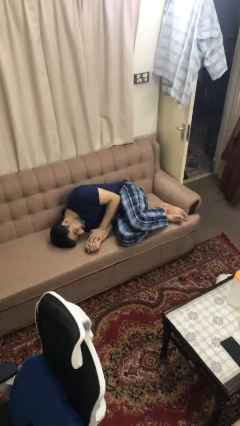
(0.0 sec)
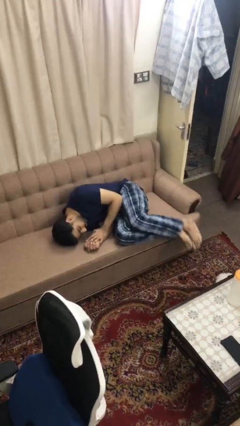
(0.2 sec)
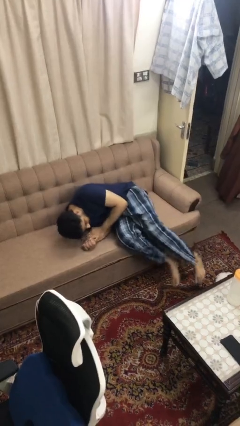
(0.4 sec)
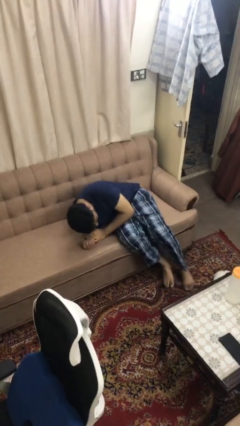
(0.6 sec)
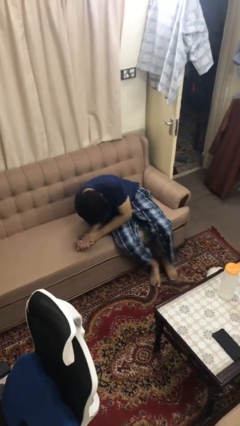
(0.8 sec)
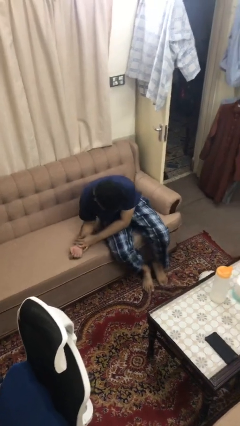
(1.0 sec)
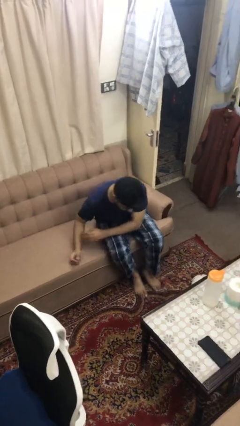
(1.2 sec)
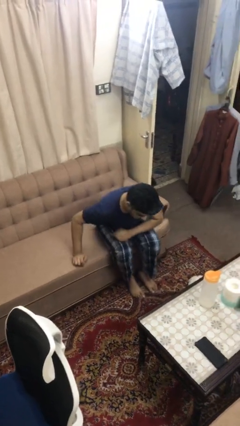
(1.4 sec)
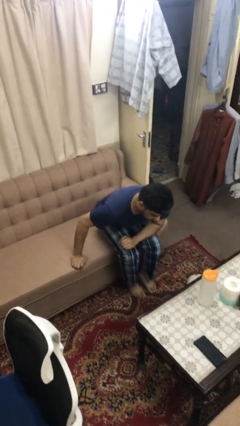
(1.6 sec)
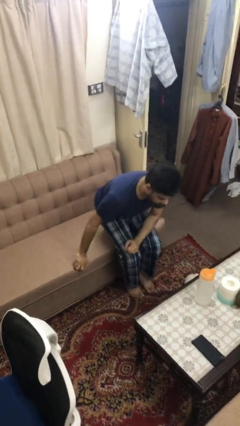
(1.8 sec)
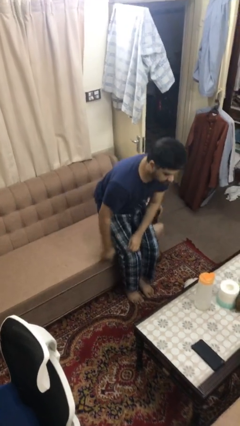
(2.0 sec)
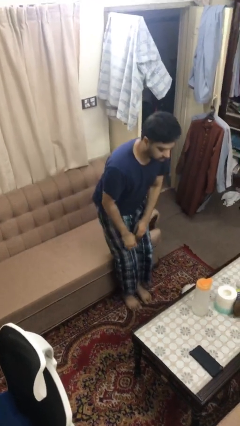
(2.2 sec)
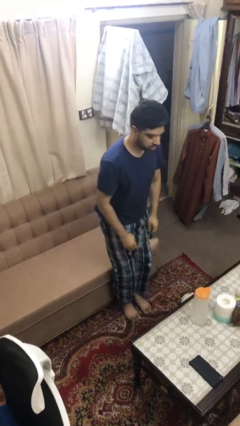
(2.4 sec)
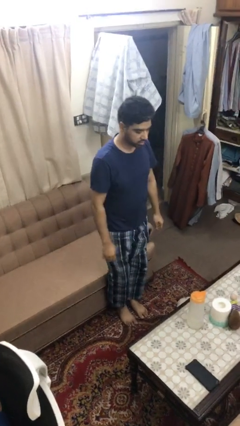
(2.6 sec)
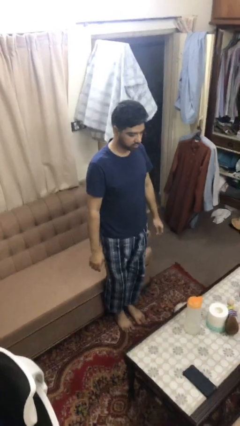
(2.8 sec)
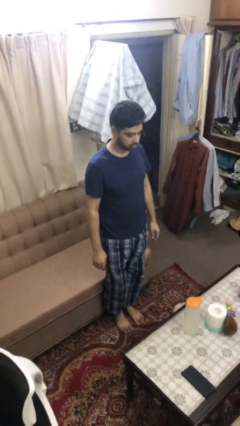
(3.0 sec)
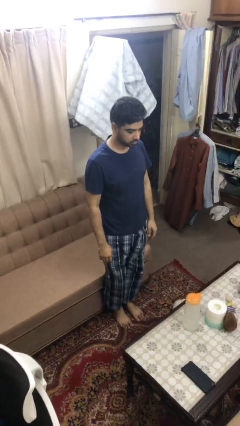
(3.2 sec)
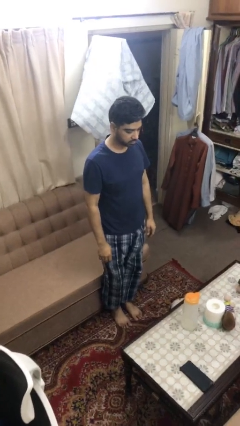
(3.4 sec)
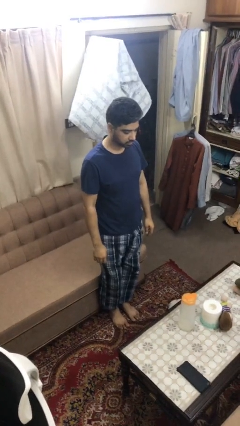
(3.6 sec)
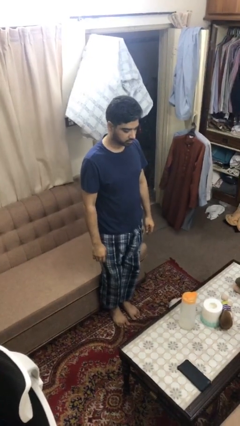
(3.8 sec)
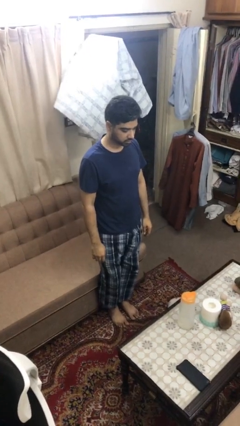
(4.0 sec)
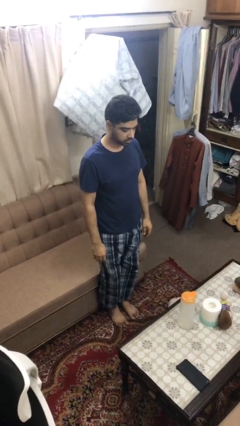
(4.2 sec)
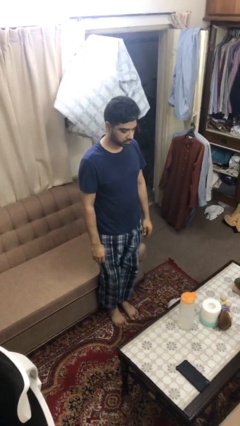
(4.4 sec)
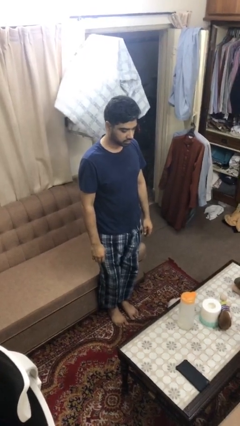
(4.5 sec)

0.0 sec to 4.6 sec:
person stands up

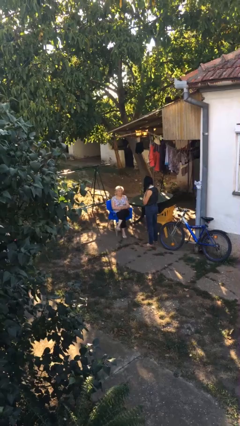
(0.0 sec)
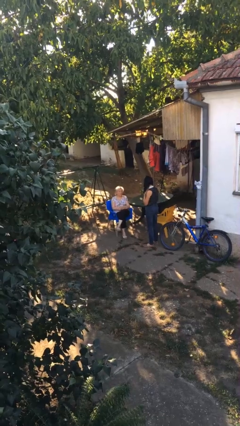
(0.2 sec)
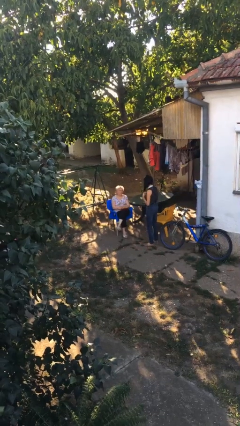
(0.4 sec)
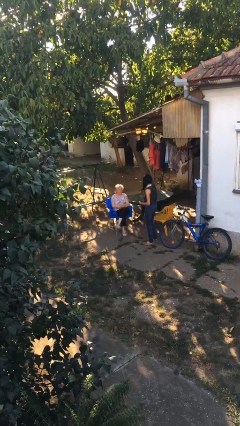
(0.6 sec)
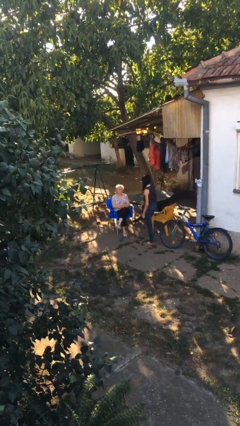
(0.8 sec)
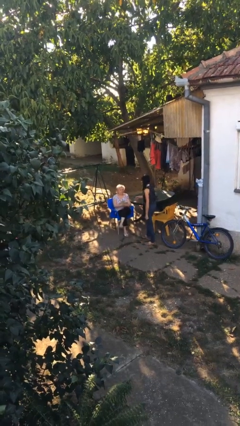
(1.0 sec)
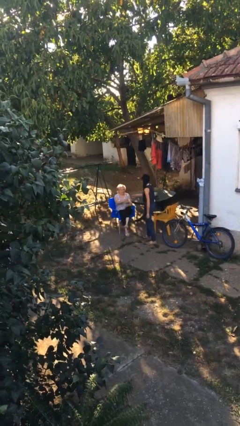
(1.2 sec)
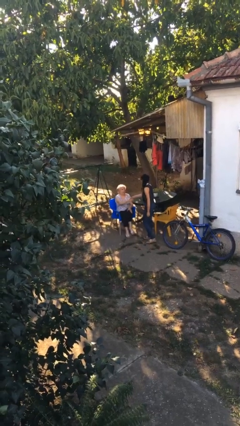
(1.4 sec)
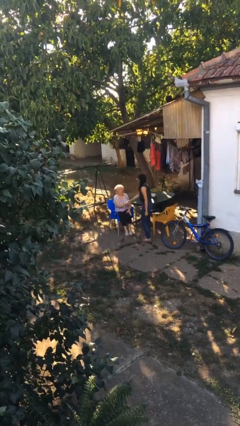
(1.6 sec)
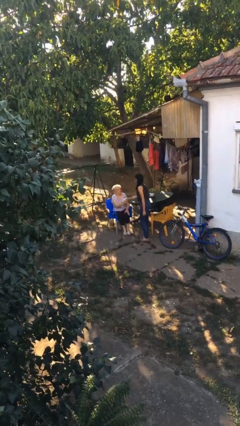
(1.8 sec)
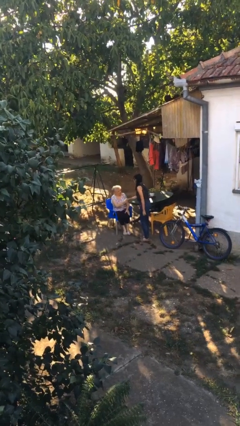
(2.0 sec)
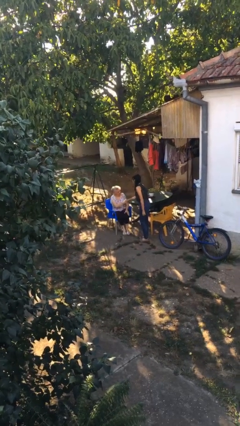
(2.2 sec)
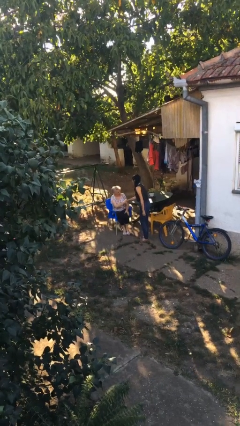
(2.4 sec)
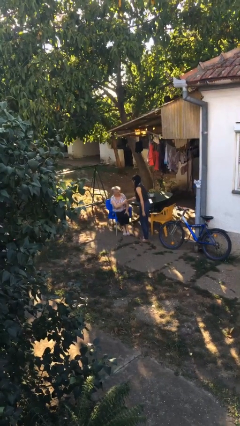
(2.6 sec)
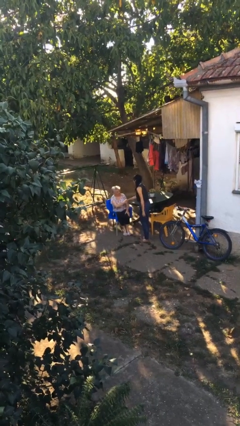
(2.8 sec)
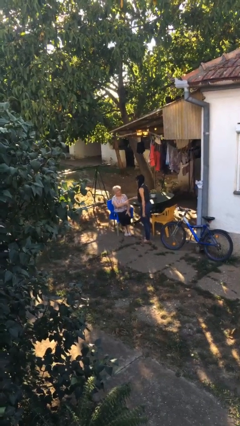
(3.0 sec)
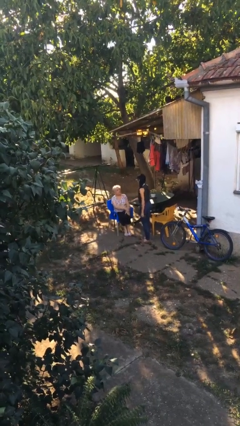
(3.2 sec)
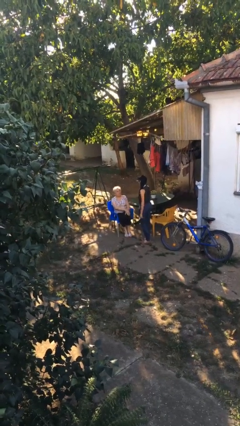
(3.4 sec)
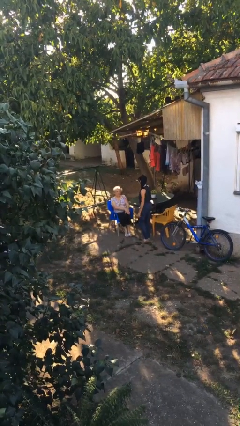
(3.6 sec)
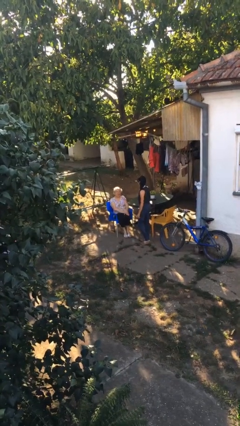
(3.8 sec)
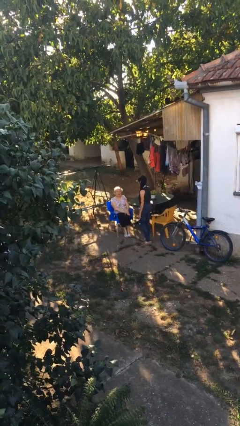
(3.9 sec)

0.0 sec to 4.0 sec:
person shakes hand

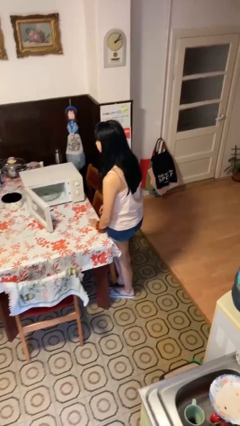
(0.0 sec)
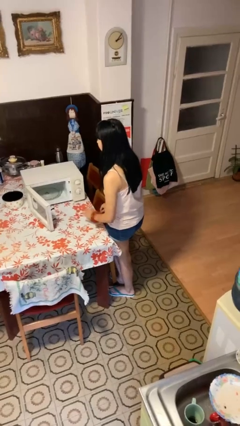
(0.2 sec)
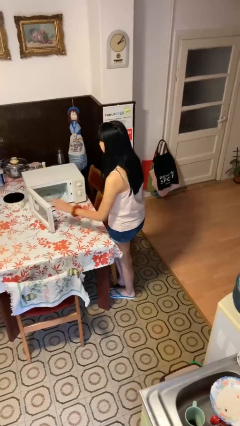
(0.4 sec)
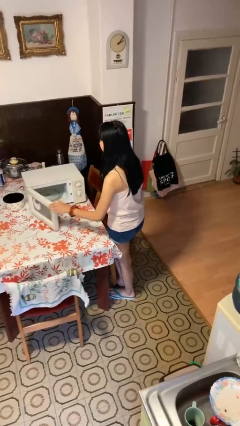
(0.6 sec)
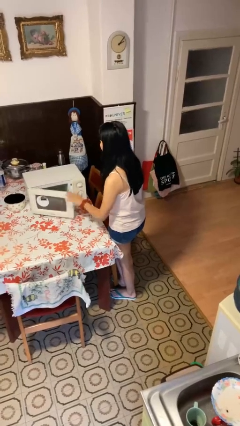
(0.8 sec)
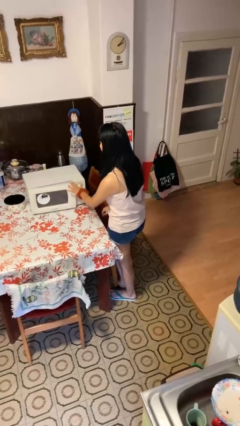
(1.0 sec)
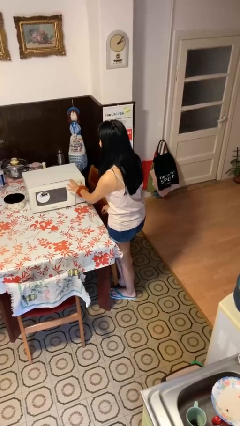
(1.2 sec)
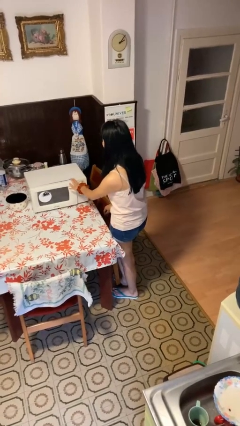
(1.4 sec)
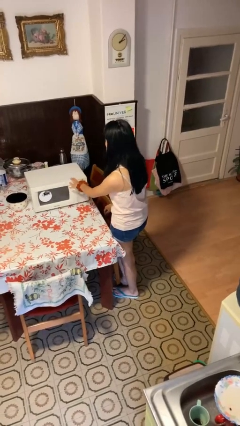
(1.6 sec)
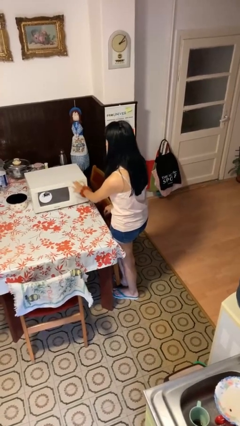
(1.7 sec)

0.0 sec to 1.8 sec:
person closes microwave

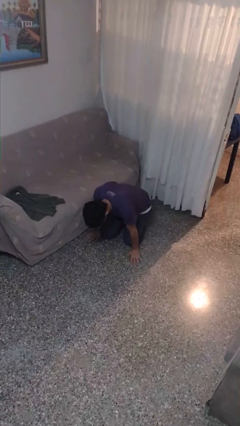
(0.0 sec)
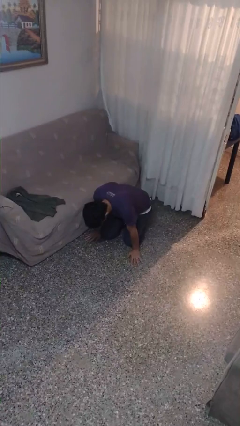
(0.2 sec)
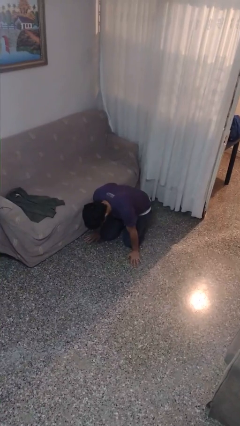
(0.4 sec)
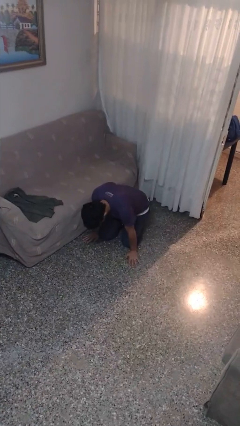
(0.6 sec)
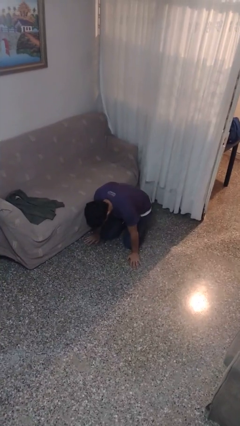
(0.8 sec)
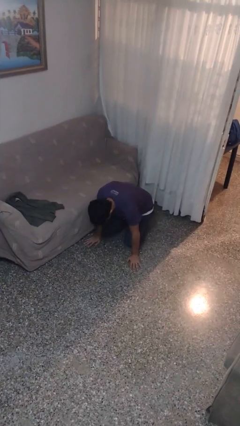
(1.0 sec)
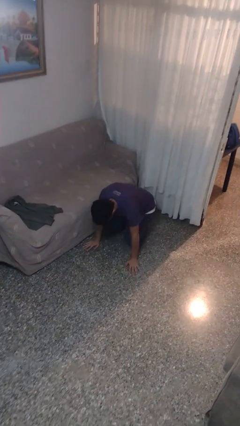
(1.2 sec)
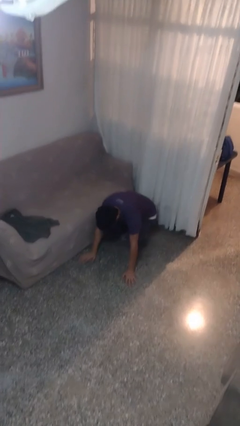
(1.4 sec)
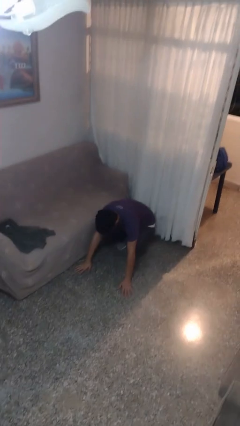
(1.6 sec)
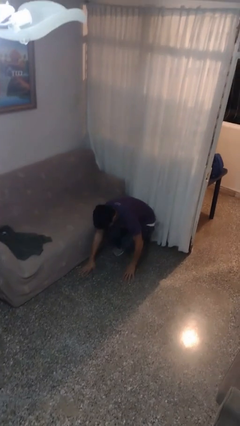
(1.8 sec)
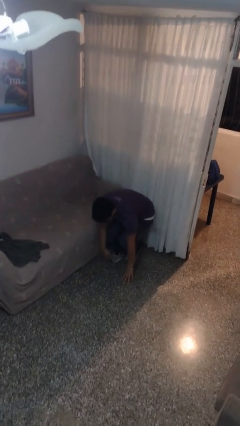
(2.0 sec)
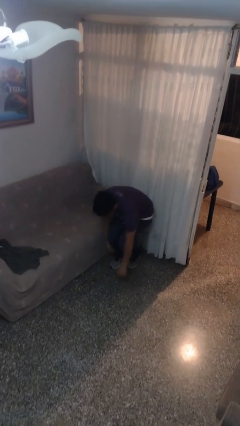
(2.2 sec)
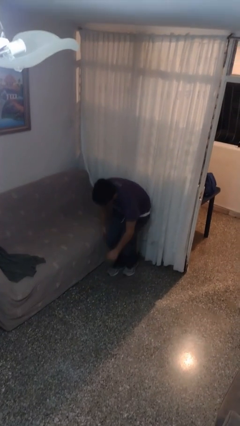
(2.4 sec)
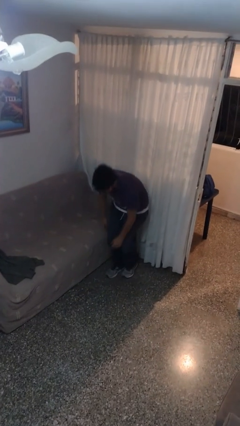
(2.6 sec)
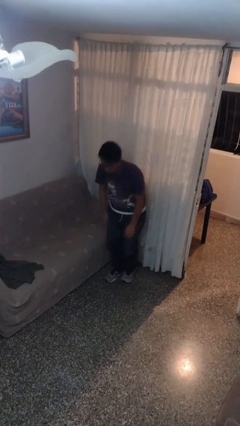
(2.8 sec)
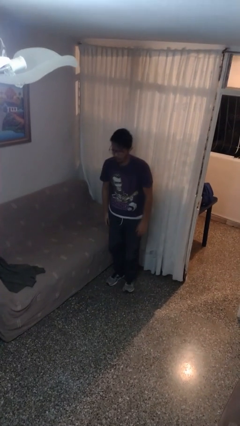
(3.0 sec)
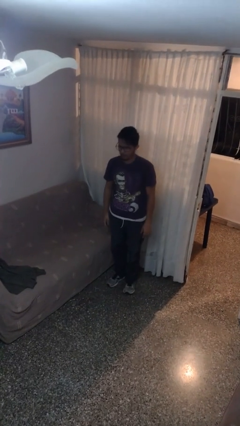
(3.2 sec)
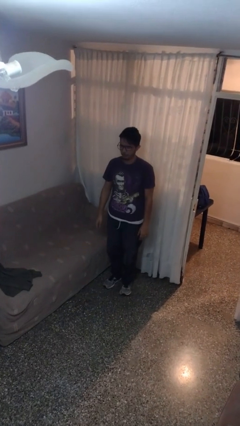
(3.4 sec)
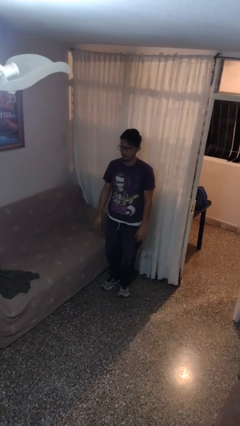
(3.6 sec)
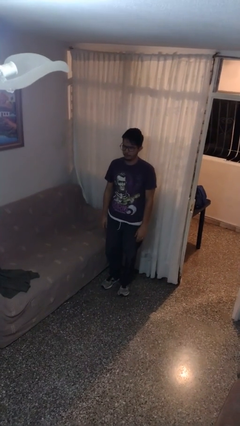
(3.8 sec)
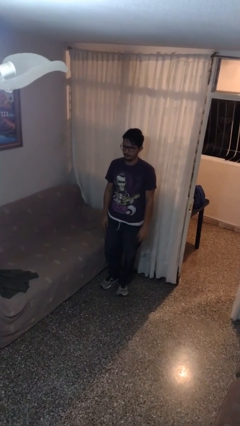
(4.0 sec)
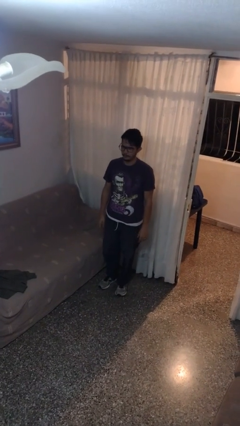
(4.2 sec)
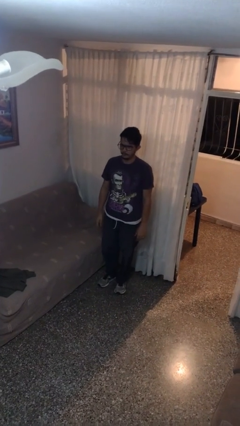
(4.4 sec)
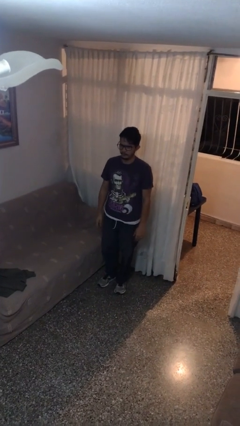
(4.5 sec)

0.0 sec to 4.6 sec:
person stands up from floor

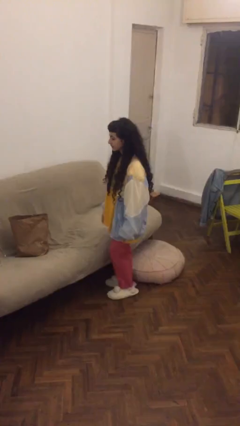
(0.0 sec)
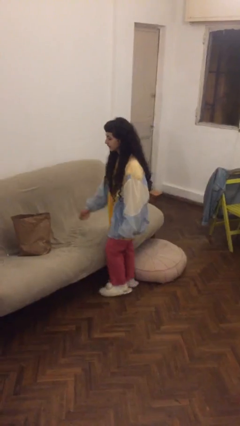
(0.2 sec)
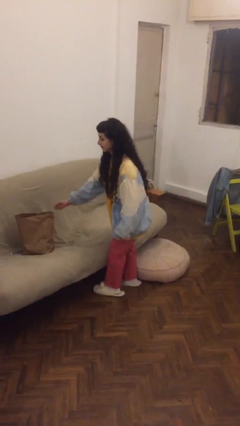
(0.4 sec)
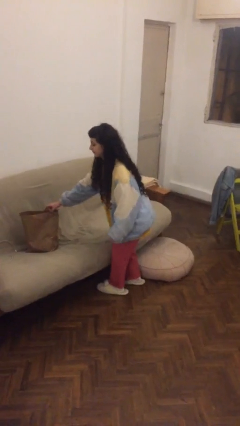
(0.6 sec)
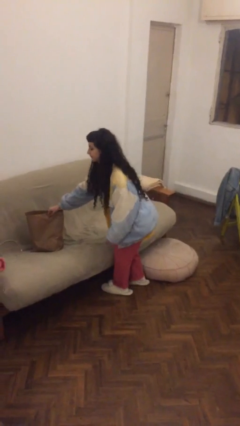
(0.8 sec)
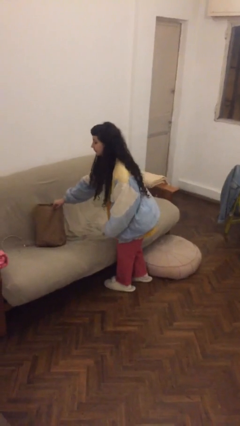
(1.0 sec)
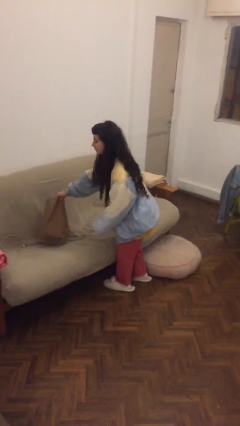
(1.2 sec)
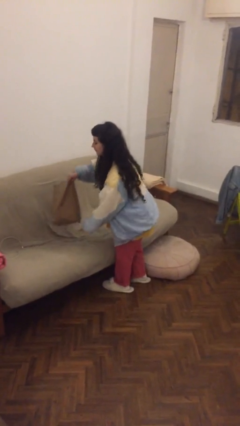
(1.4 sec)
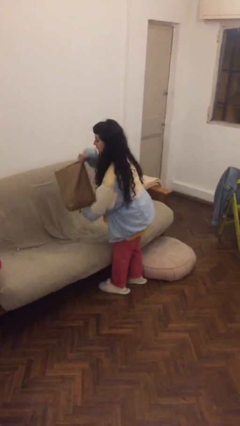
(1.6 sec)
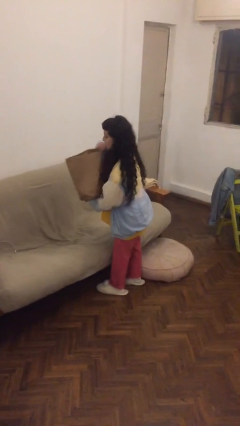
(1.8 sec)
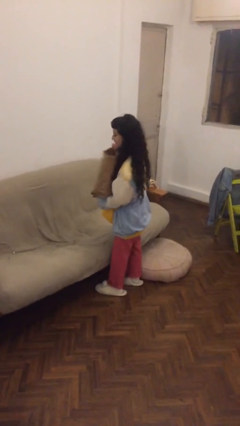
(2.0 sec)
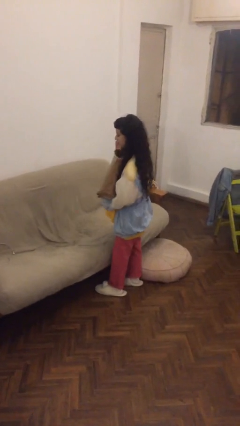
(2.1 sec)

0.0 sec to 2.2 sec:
person picks up object from couch

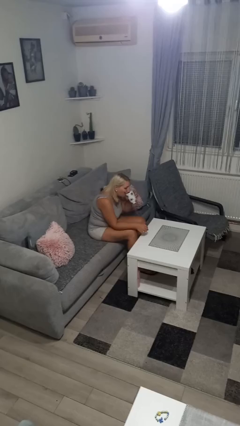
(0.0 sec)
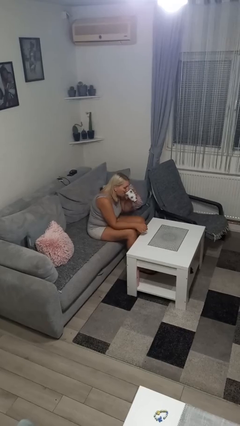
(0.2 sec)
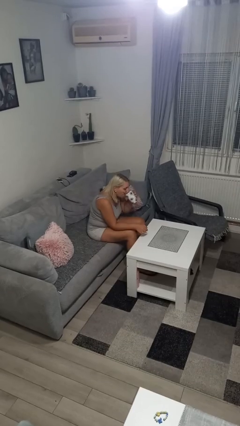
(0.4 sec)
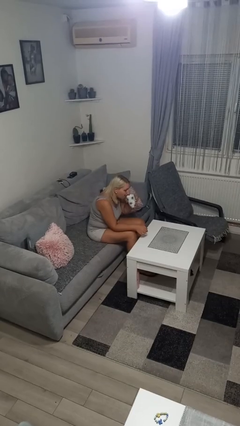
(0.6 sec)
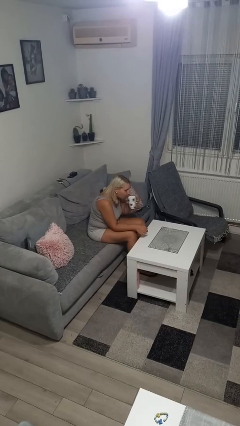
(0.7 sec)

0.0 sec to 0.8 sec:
person drinks from mug
